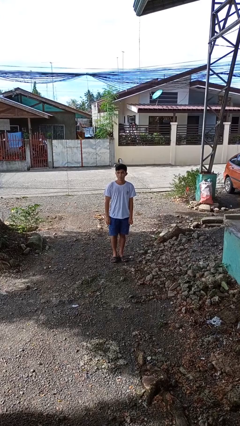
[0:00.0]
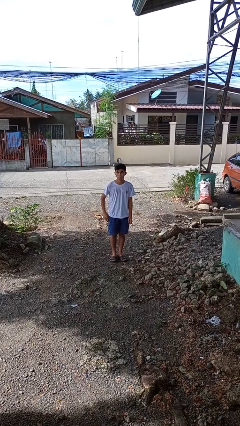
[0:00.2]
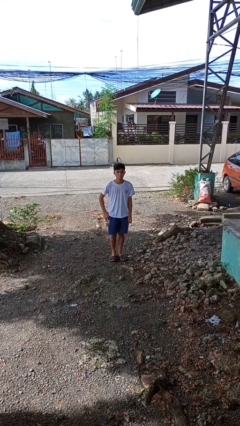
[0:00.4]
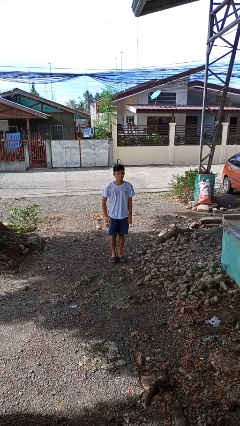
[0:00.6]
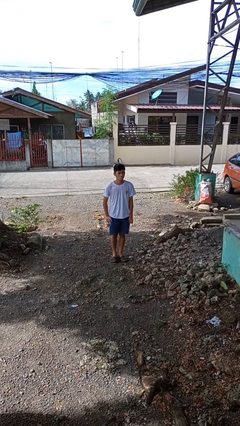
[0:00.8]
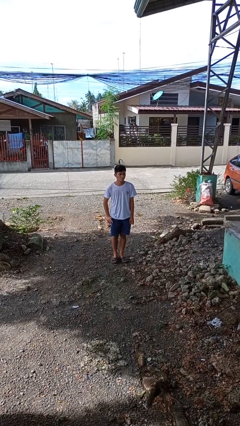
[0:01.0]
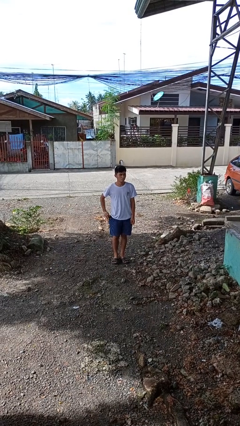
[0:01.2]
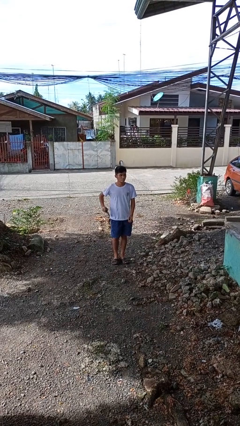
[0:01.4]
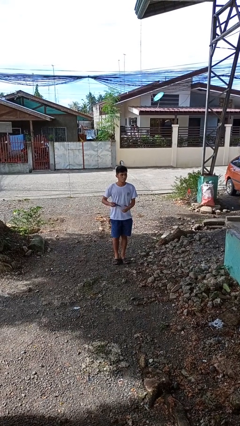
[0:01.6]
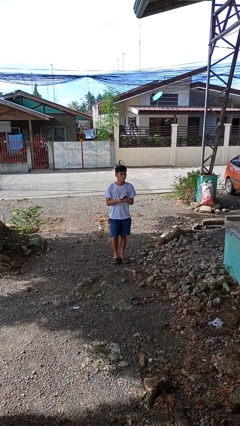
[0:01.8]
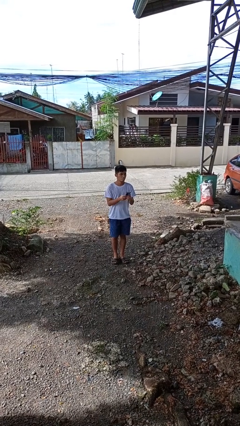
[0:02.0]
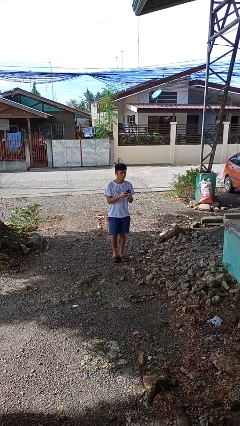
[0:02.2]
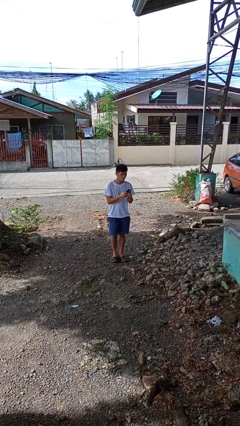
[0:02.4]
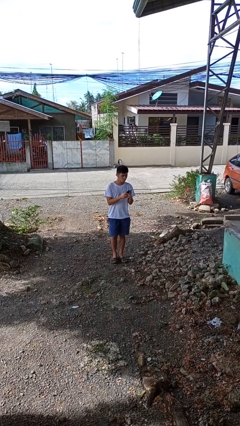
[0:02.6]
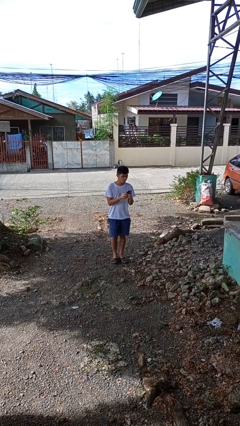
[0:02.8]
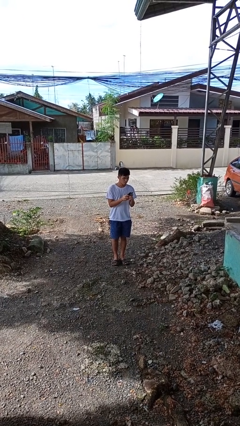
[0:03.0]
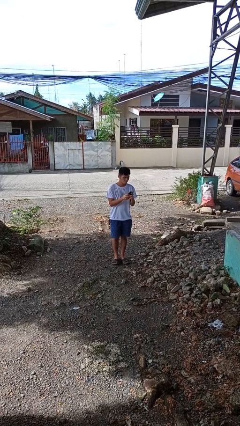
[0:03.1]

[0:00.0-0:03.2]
person takes phone from pocket

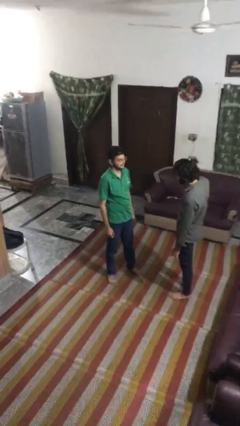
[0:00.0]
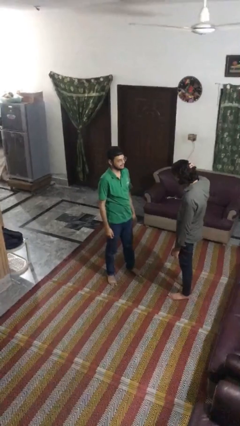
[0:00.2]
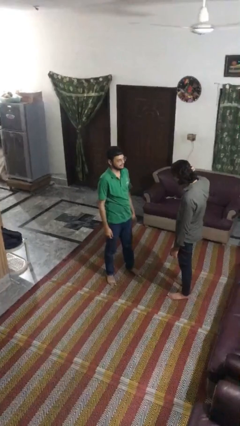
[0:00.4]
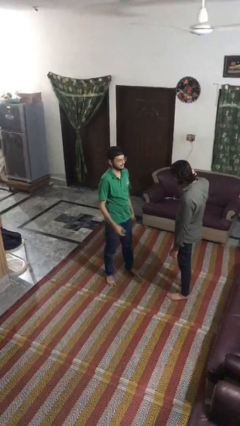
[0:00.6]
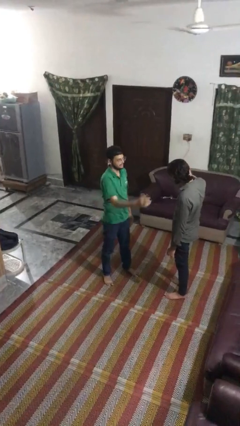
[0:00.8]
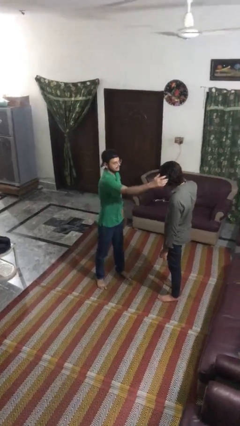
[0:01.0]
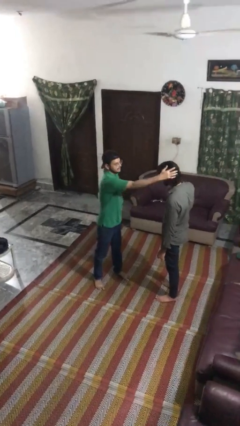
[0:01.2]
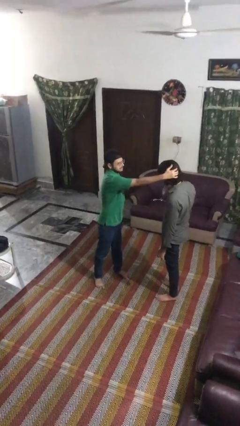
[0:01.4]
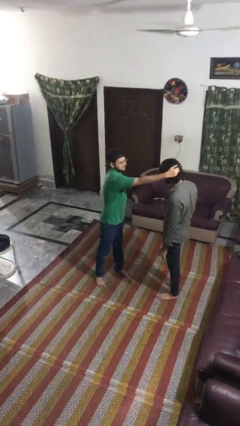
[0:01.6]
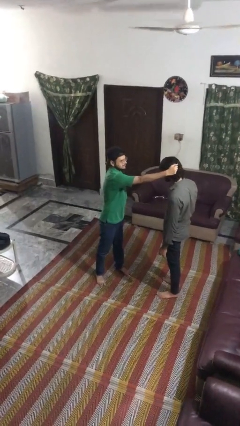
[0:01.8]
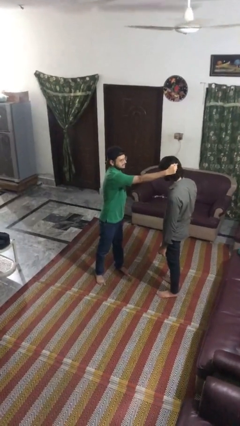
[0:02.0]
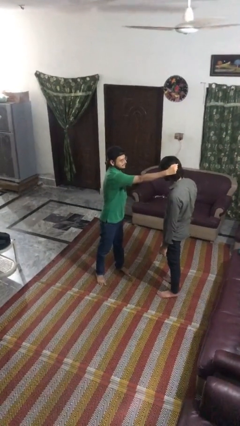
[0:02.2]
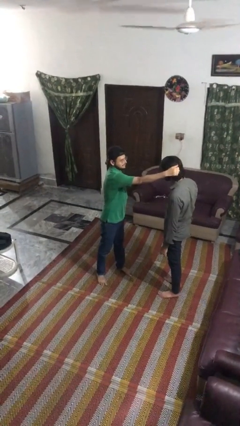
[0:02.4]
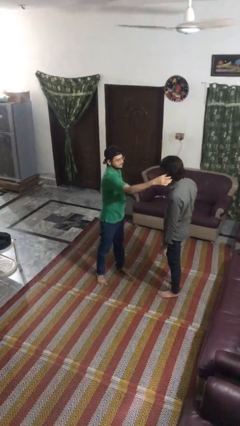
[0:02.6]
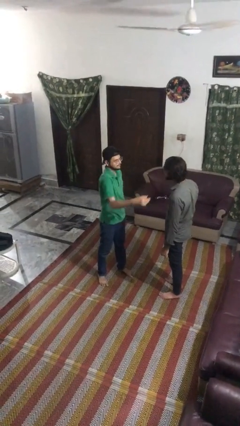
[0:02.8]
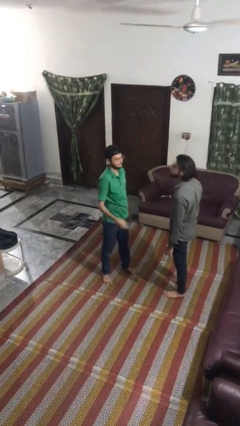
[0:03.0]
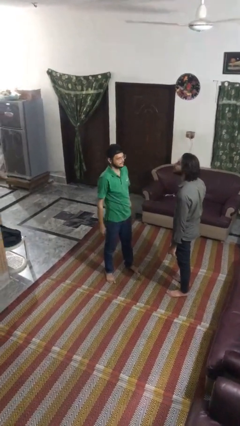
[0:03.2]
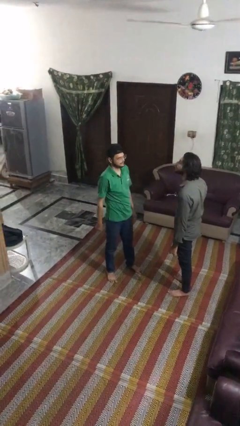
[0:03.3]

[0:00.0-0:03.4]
person grabs person by hair

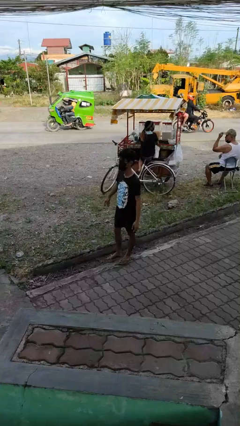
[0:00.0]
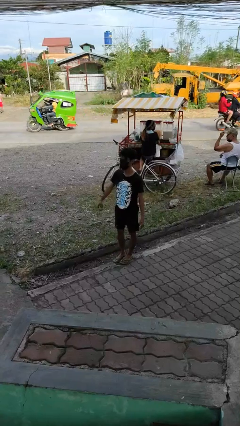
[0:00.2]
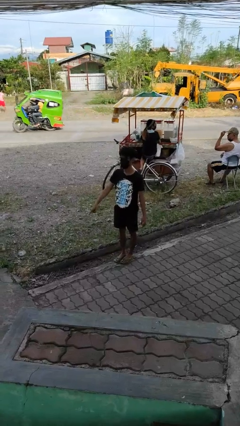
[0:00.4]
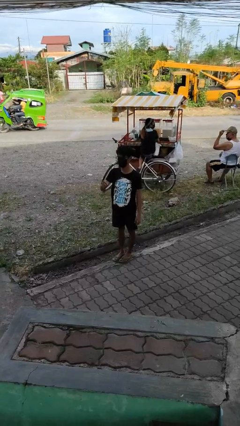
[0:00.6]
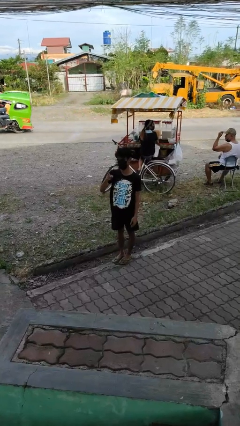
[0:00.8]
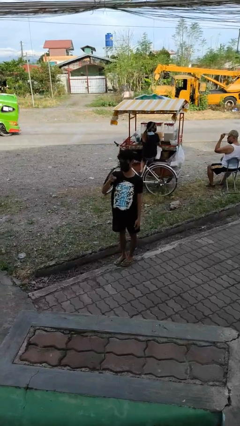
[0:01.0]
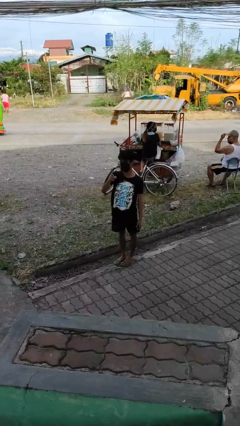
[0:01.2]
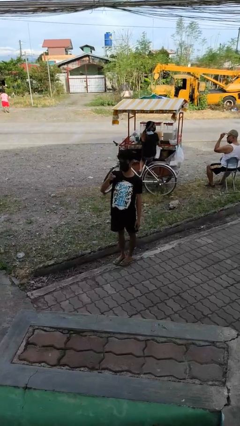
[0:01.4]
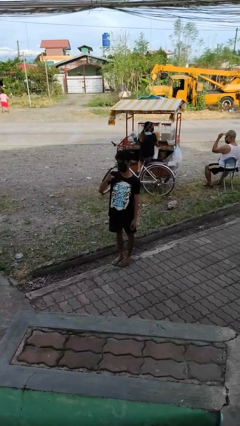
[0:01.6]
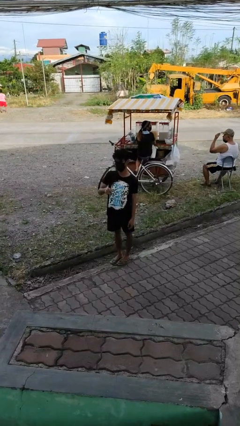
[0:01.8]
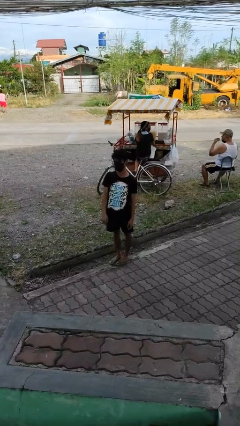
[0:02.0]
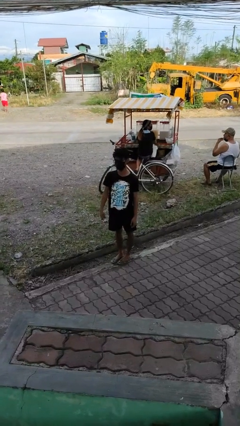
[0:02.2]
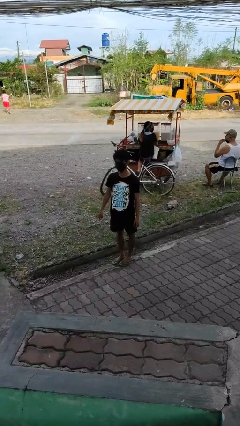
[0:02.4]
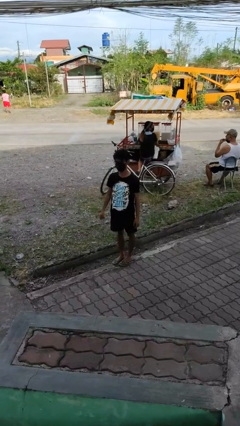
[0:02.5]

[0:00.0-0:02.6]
person points at person

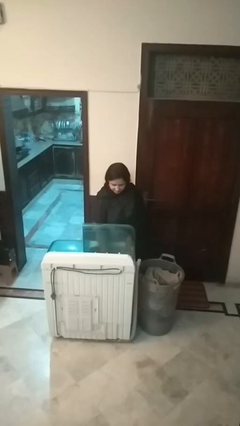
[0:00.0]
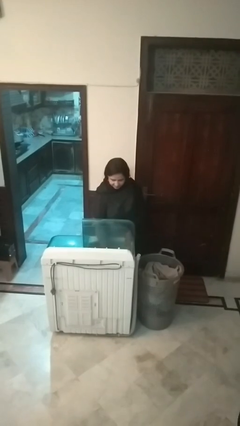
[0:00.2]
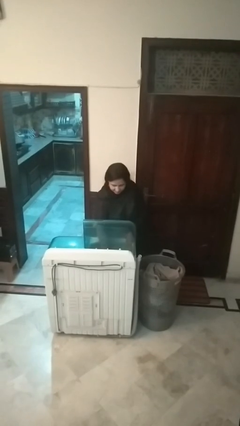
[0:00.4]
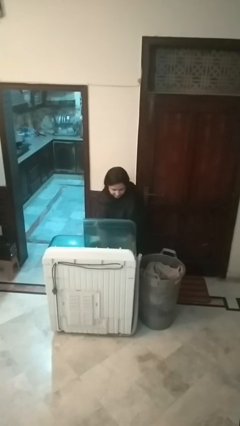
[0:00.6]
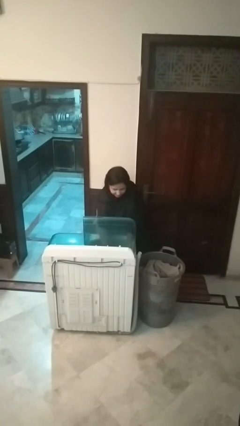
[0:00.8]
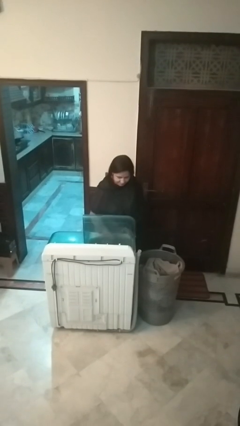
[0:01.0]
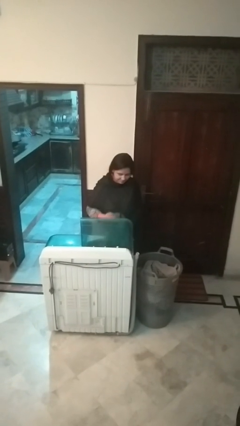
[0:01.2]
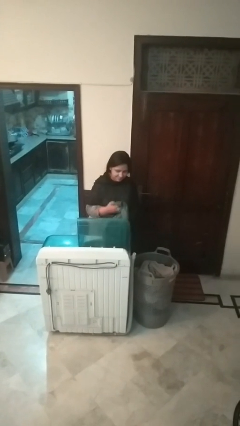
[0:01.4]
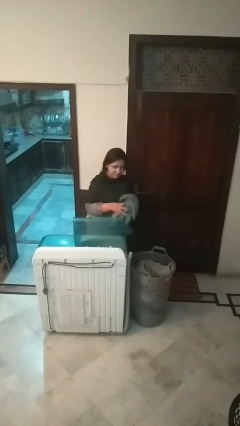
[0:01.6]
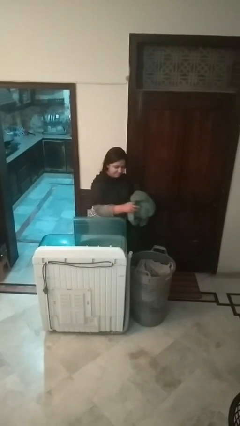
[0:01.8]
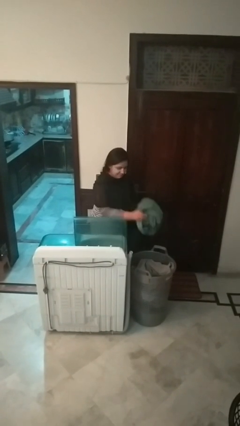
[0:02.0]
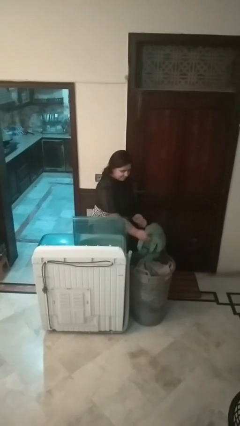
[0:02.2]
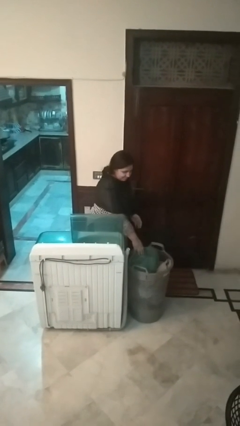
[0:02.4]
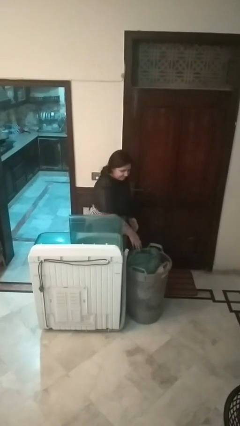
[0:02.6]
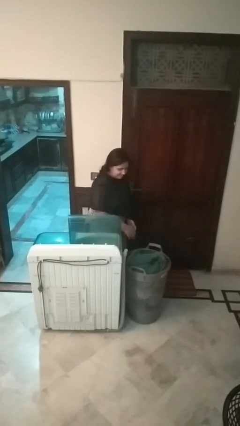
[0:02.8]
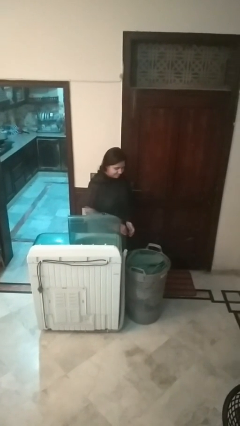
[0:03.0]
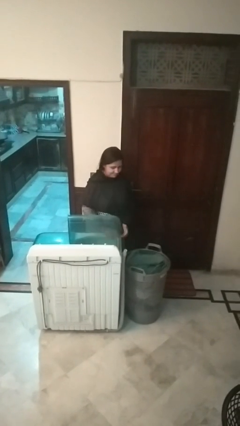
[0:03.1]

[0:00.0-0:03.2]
person unloads clotheswasher

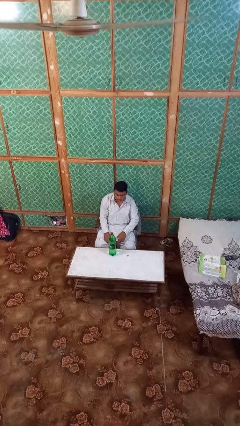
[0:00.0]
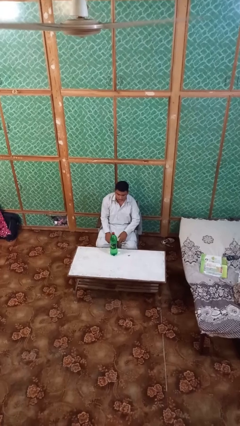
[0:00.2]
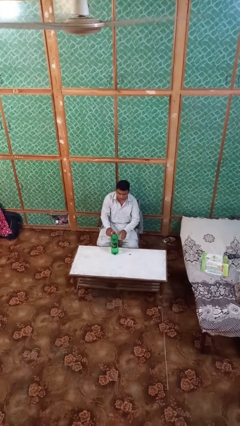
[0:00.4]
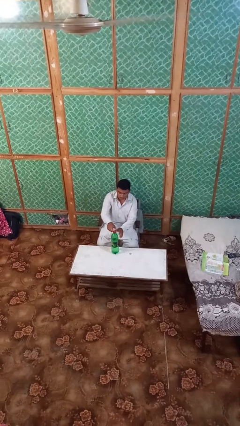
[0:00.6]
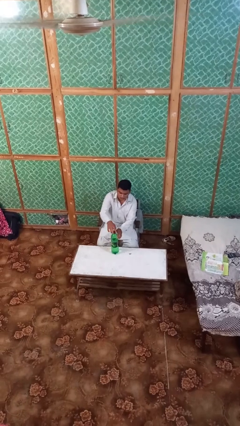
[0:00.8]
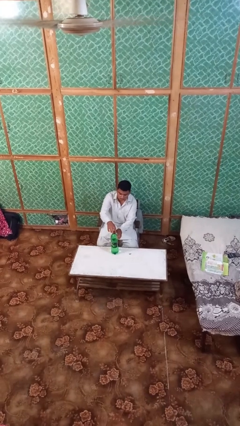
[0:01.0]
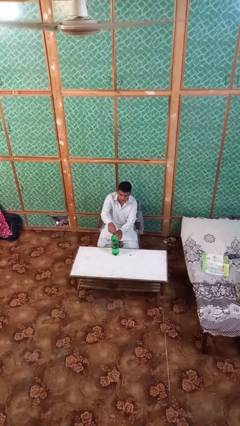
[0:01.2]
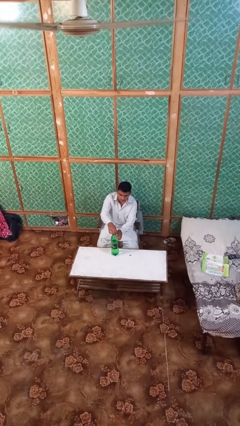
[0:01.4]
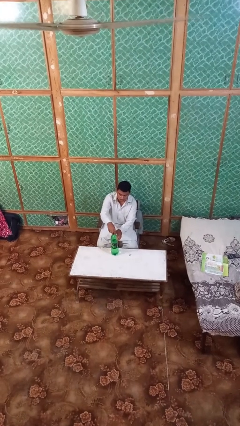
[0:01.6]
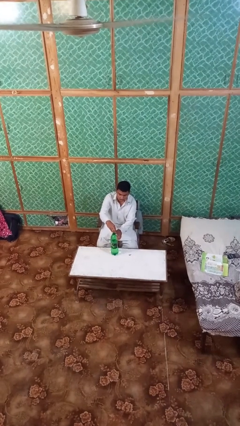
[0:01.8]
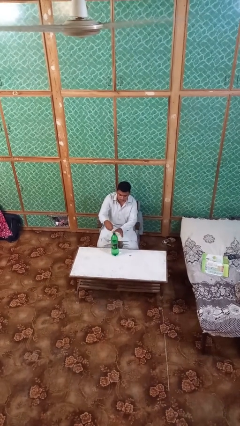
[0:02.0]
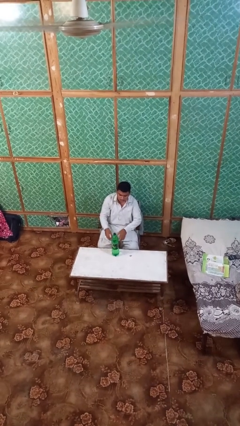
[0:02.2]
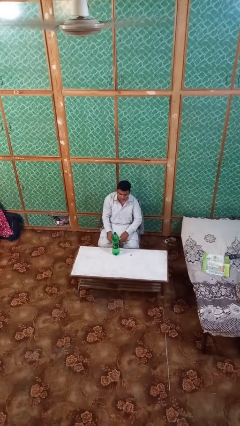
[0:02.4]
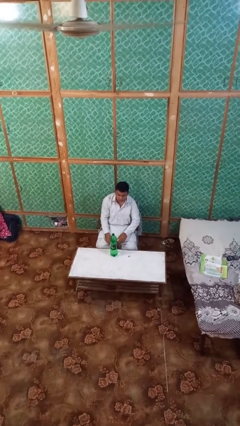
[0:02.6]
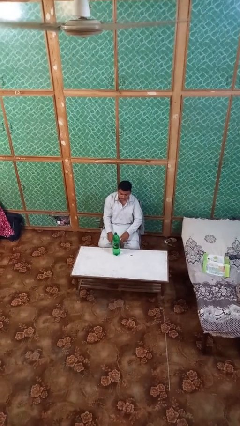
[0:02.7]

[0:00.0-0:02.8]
person unscrews lid from bottle

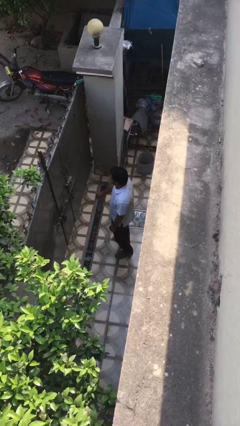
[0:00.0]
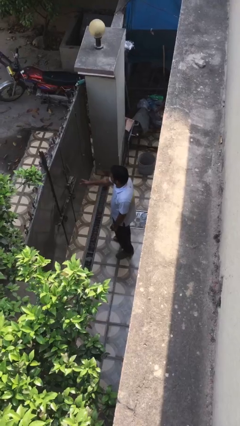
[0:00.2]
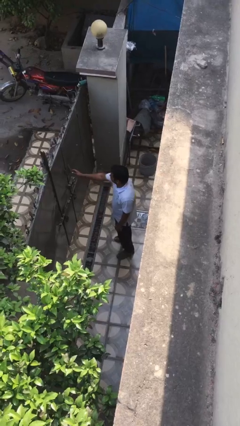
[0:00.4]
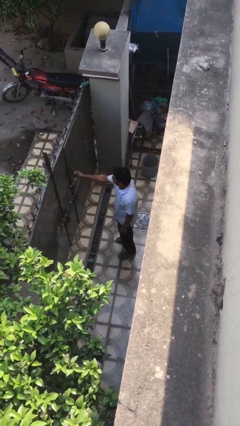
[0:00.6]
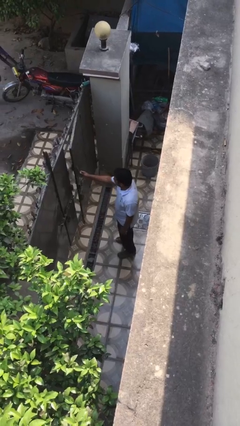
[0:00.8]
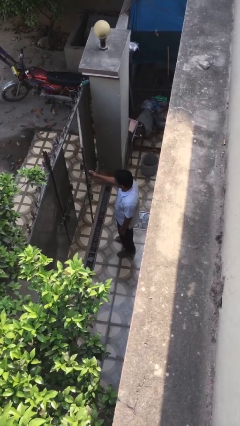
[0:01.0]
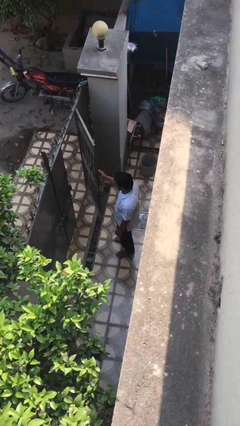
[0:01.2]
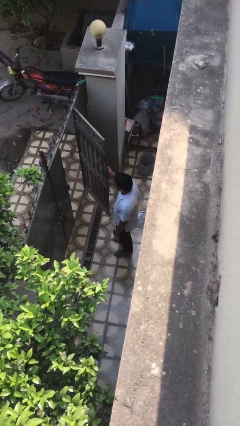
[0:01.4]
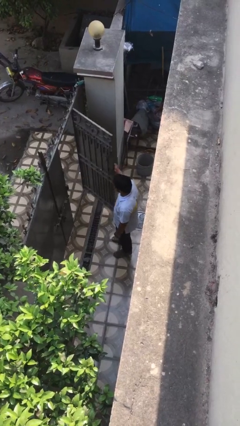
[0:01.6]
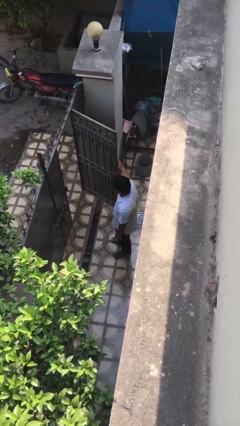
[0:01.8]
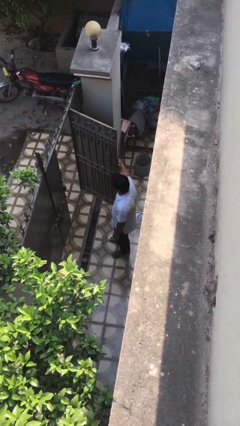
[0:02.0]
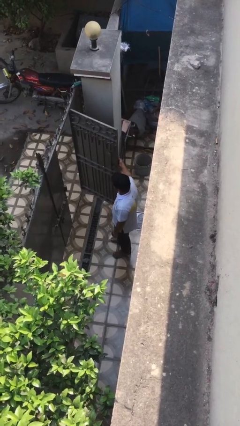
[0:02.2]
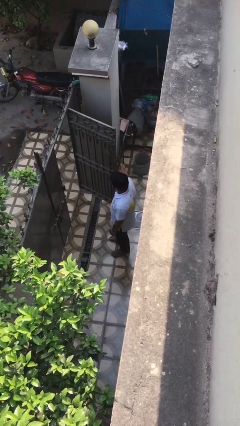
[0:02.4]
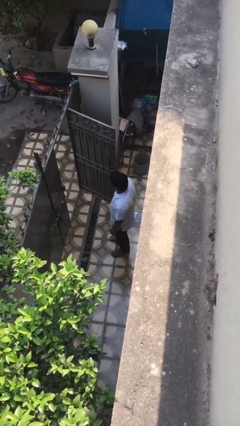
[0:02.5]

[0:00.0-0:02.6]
person opens facility door
